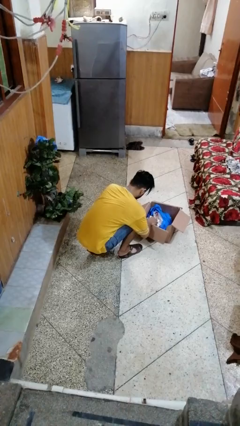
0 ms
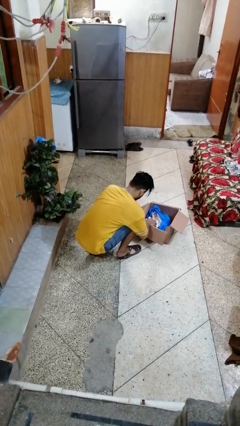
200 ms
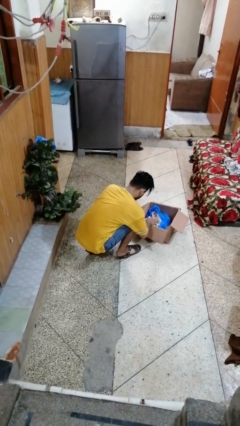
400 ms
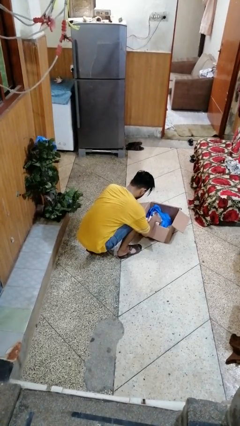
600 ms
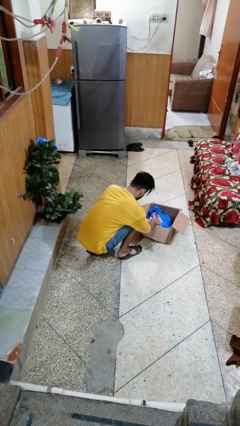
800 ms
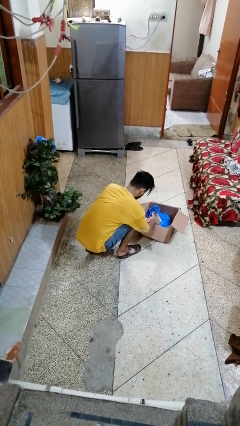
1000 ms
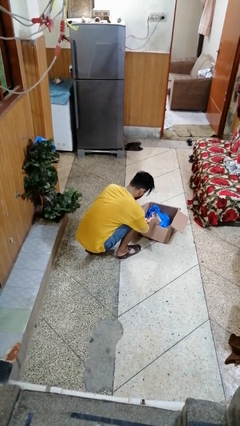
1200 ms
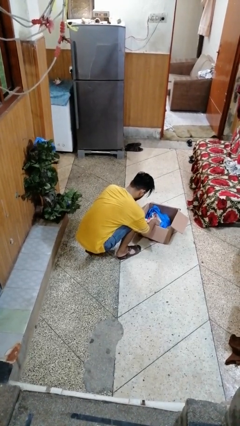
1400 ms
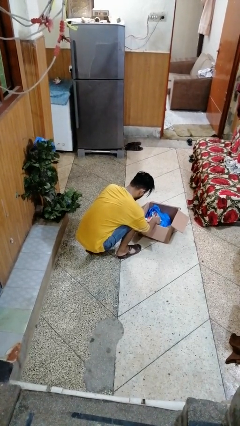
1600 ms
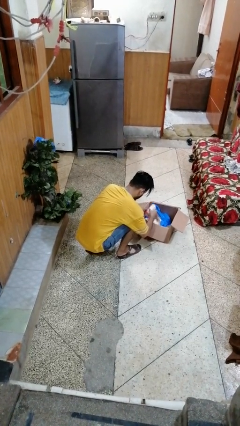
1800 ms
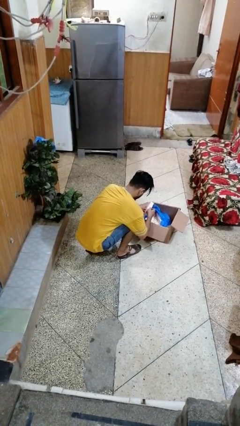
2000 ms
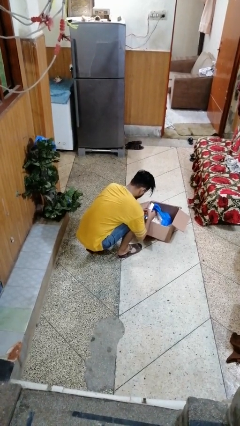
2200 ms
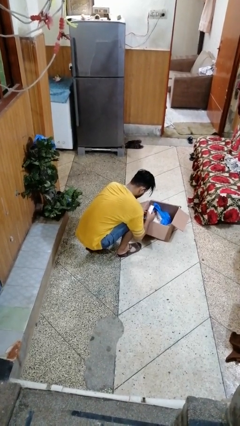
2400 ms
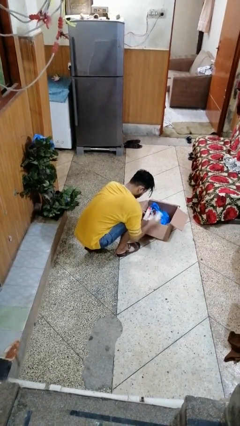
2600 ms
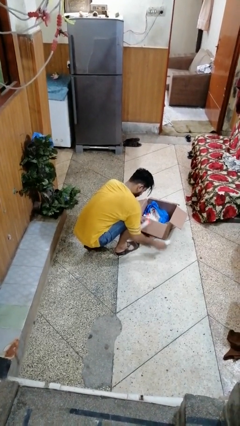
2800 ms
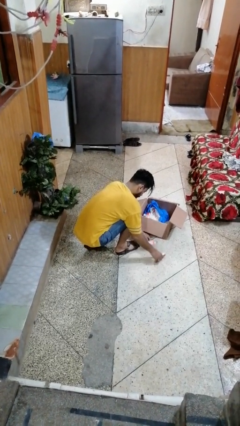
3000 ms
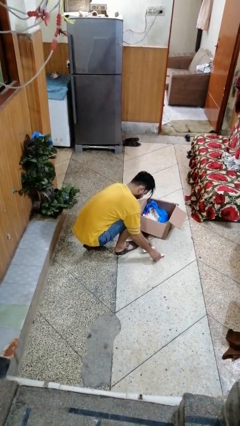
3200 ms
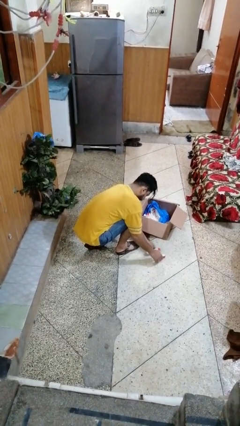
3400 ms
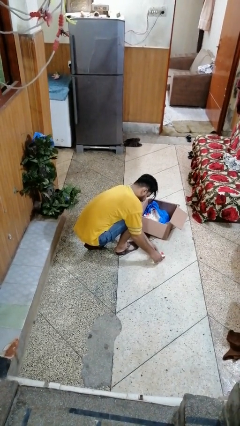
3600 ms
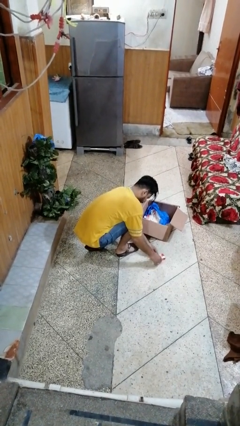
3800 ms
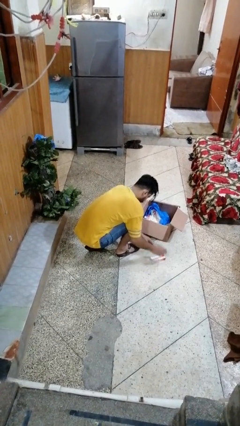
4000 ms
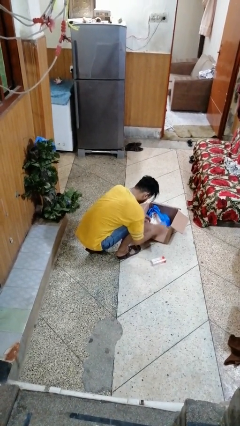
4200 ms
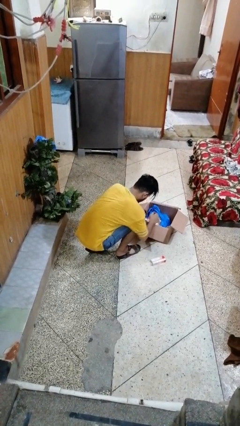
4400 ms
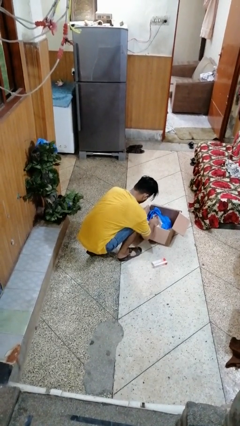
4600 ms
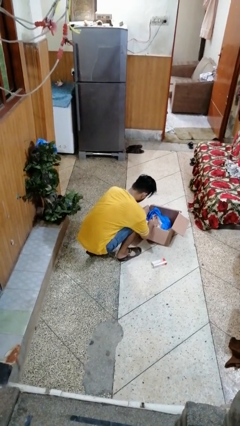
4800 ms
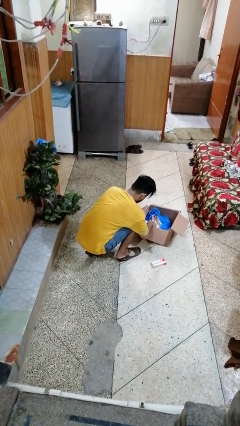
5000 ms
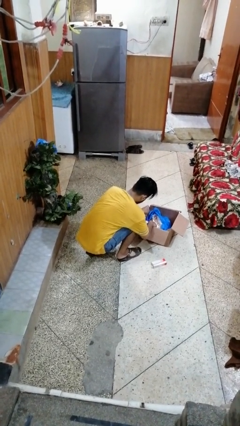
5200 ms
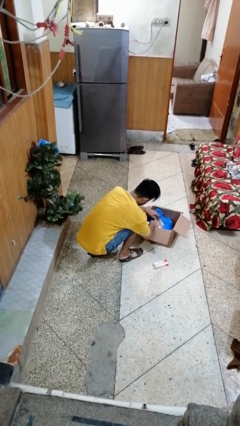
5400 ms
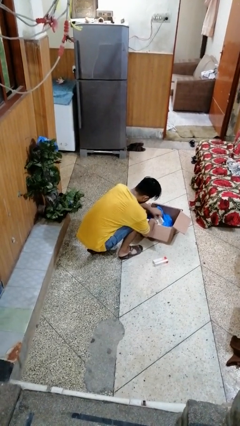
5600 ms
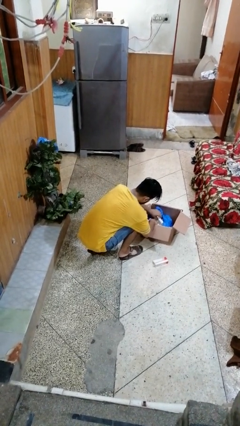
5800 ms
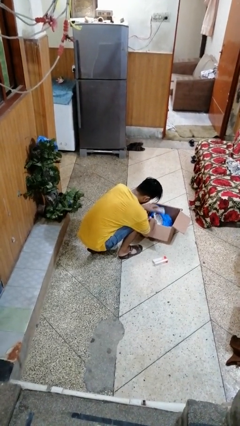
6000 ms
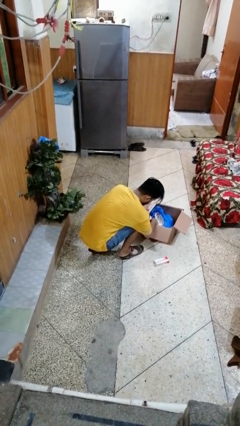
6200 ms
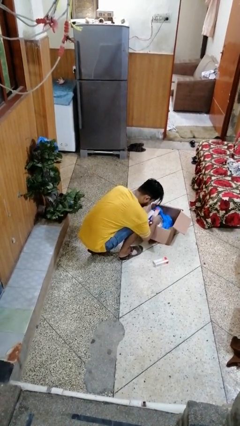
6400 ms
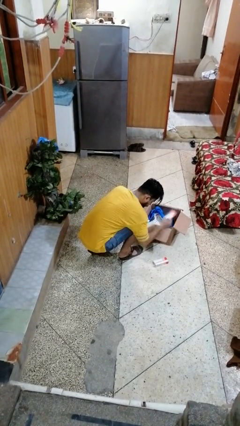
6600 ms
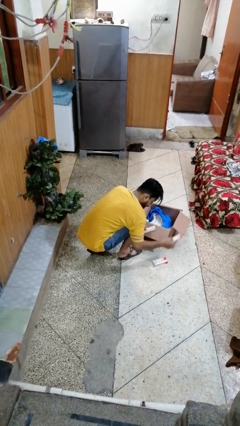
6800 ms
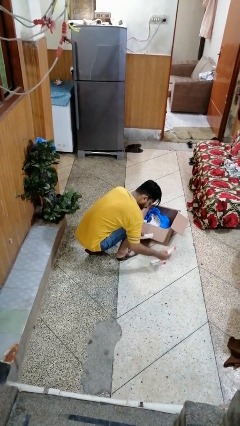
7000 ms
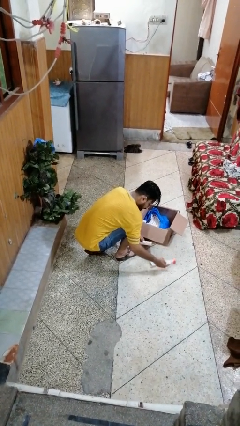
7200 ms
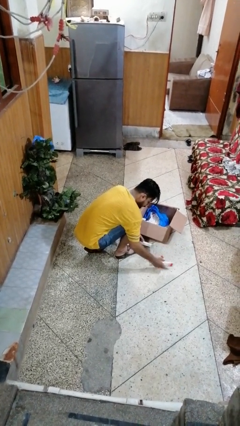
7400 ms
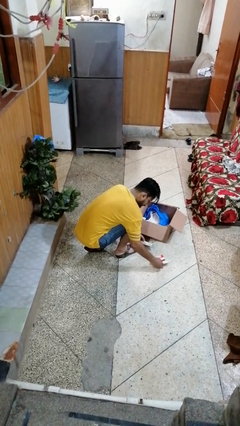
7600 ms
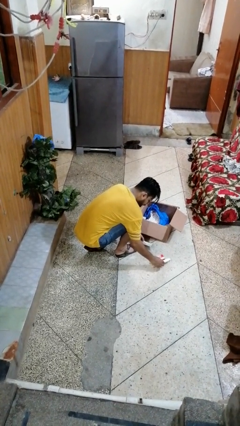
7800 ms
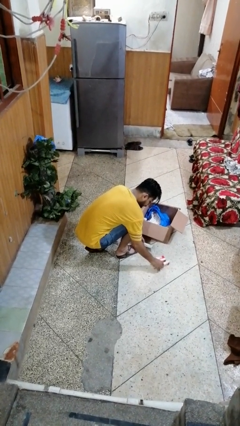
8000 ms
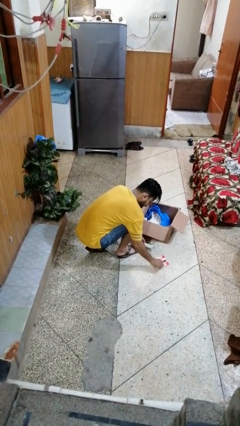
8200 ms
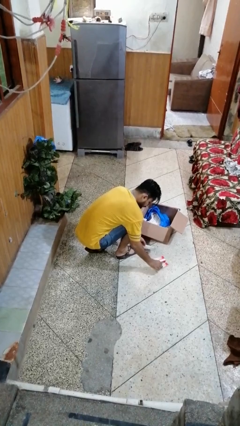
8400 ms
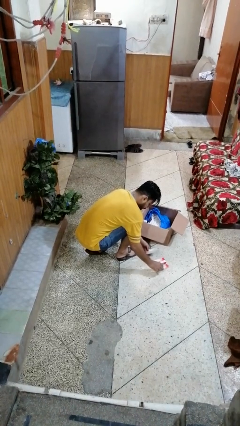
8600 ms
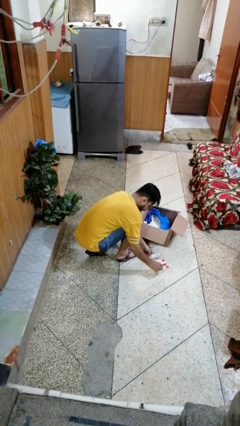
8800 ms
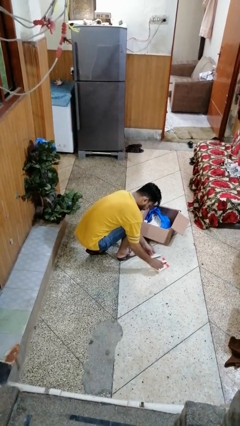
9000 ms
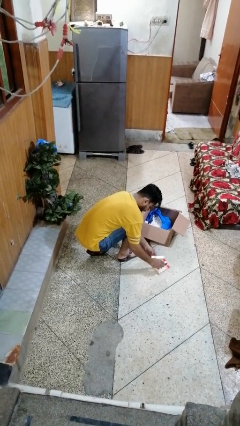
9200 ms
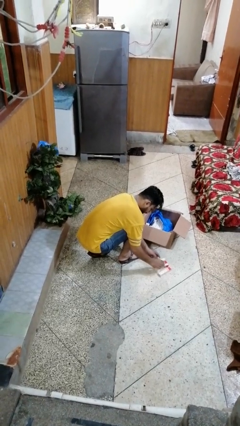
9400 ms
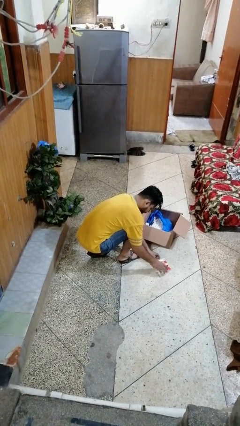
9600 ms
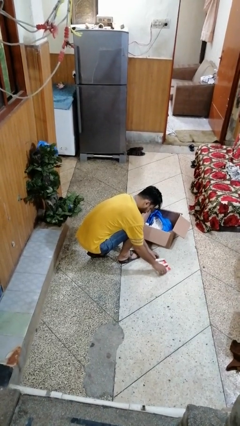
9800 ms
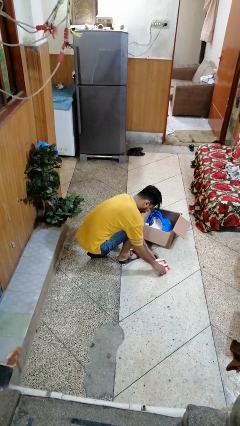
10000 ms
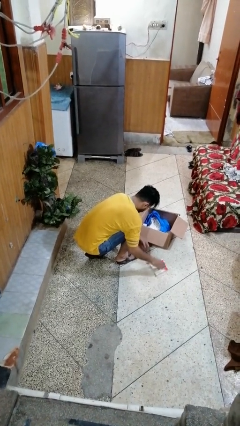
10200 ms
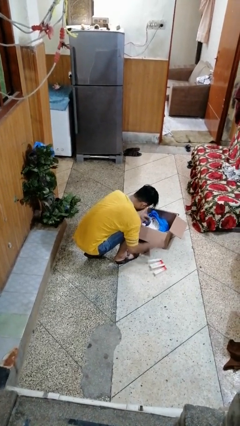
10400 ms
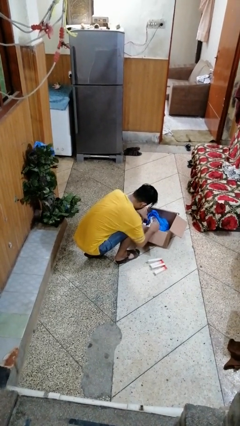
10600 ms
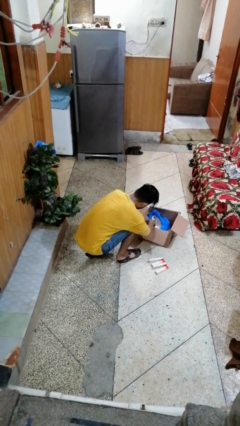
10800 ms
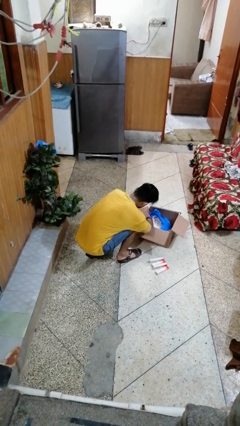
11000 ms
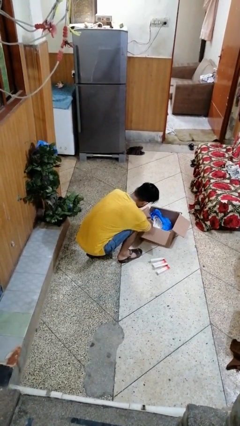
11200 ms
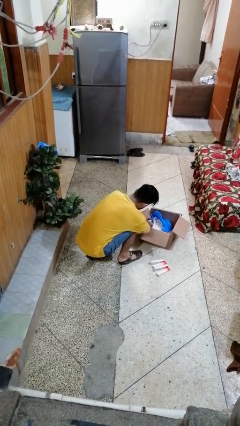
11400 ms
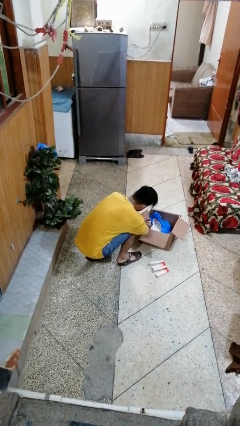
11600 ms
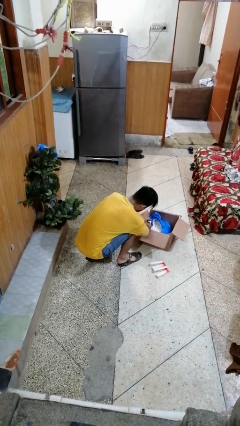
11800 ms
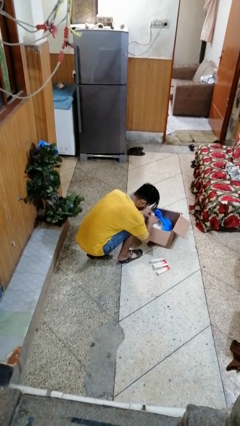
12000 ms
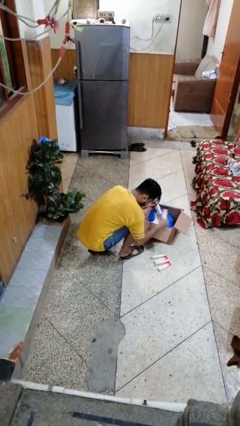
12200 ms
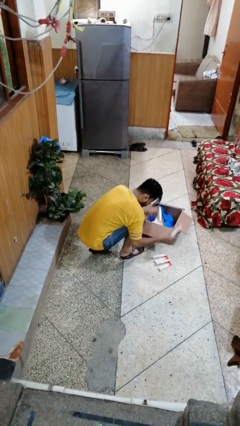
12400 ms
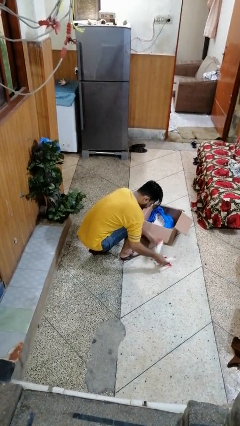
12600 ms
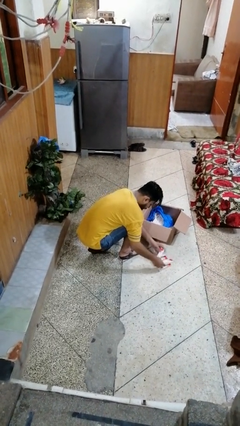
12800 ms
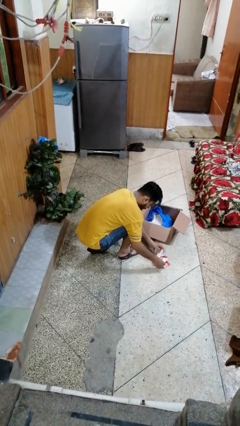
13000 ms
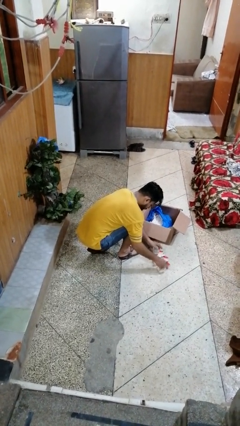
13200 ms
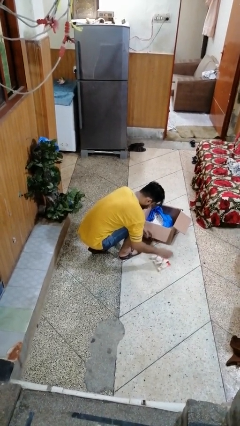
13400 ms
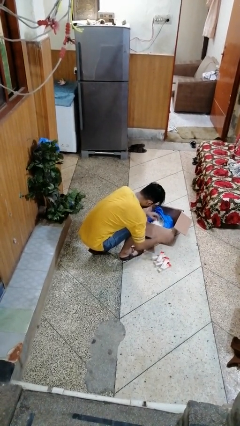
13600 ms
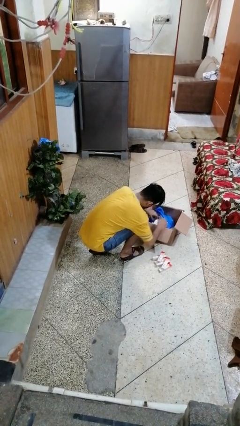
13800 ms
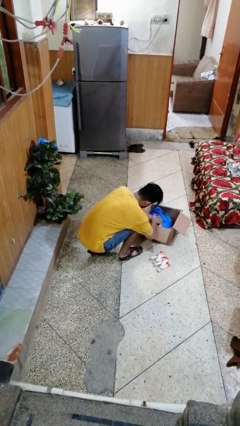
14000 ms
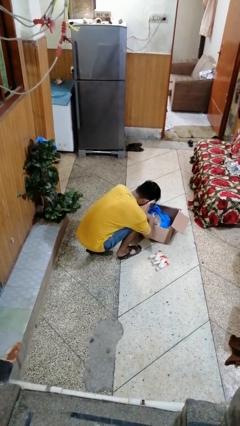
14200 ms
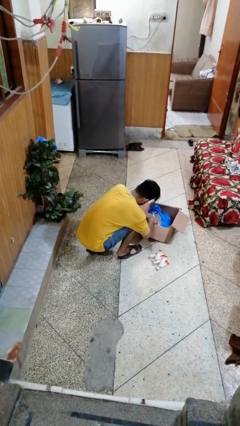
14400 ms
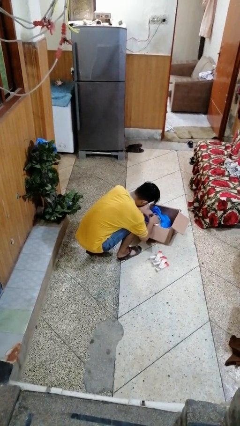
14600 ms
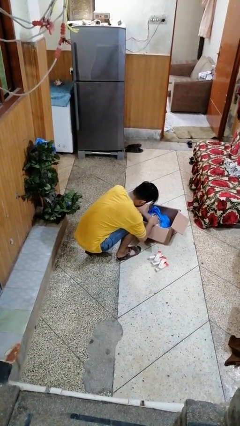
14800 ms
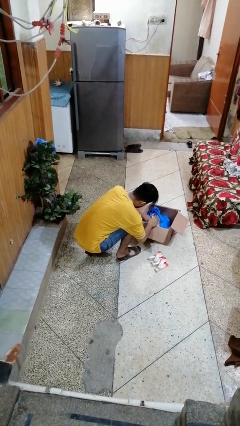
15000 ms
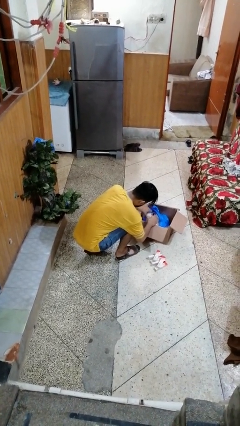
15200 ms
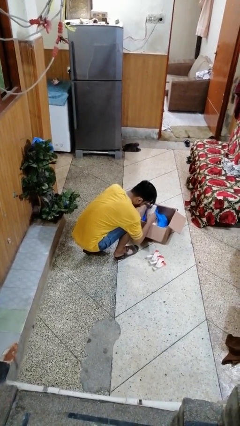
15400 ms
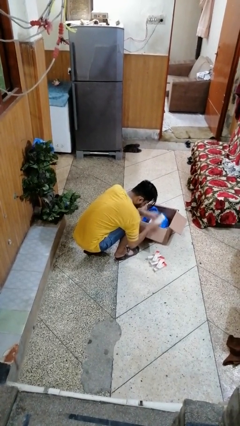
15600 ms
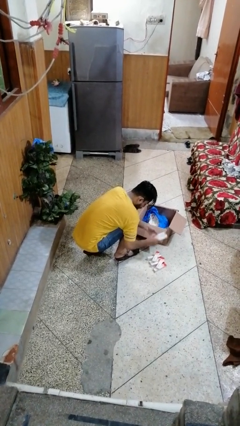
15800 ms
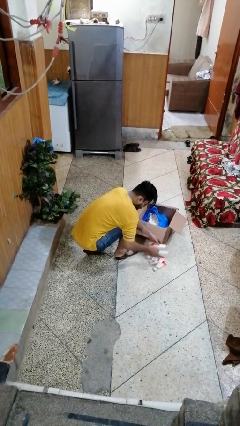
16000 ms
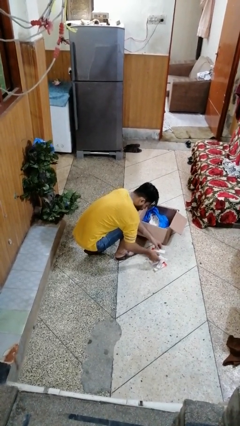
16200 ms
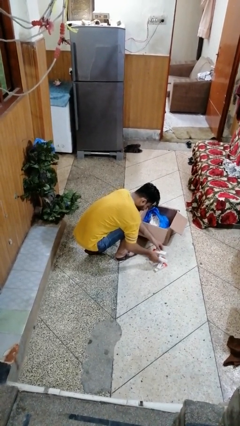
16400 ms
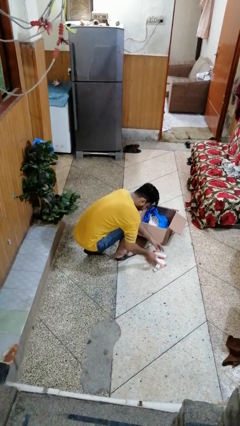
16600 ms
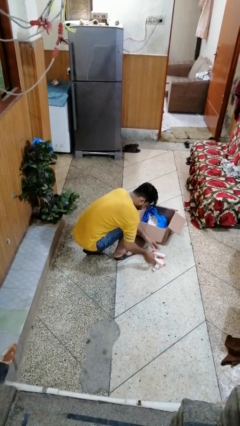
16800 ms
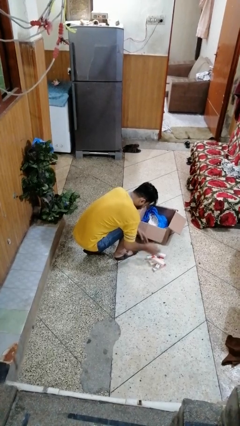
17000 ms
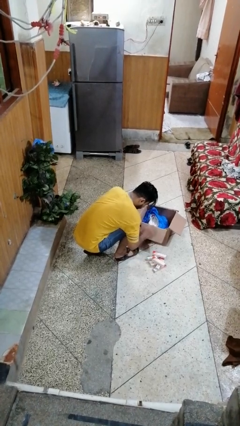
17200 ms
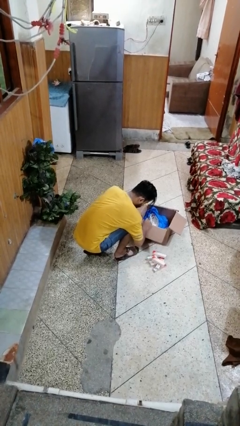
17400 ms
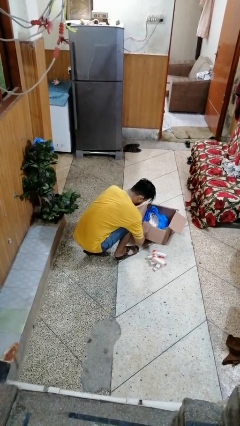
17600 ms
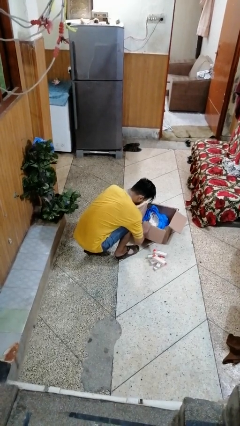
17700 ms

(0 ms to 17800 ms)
person unloads box onto floor
